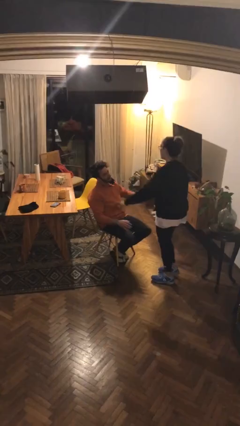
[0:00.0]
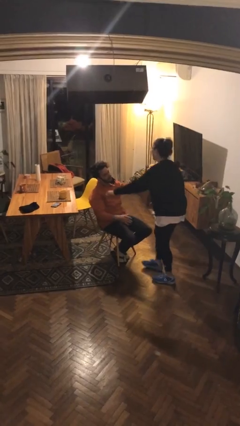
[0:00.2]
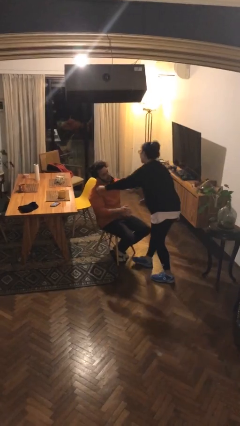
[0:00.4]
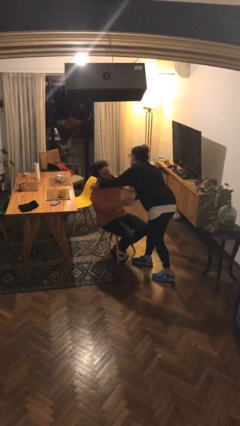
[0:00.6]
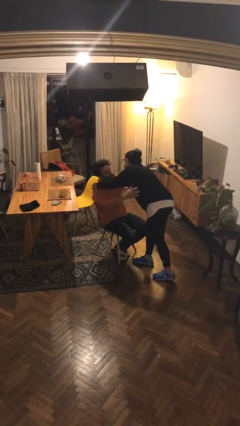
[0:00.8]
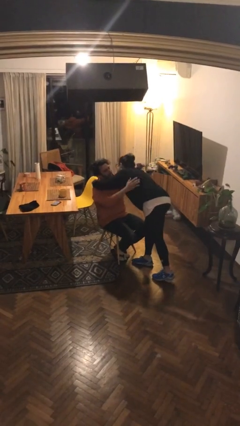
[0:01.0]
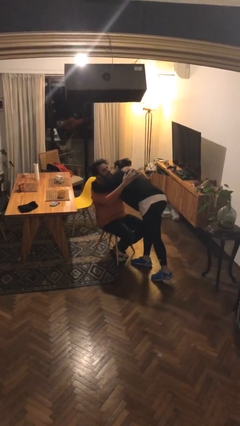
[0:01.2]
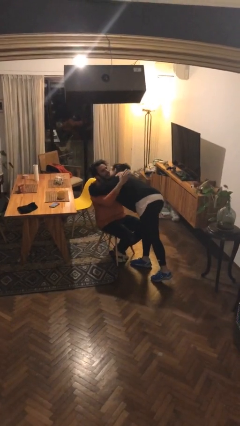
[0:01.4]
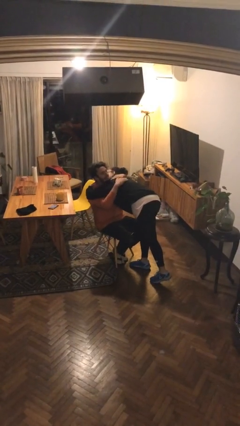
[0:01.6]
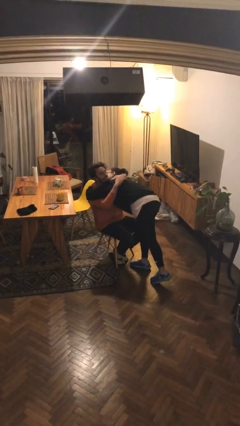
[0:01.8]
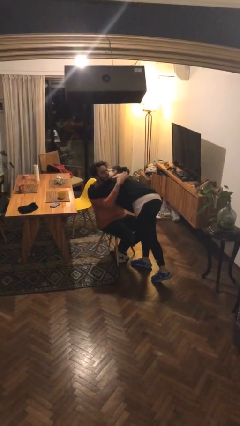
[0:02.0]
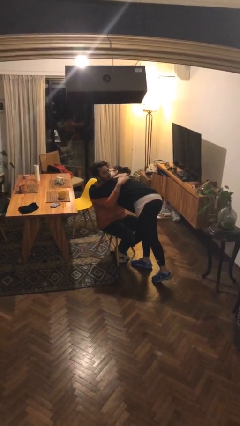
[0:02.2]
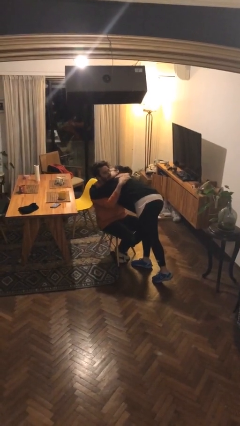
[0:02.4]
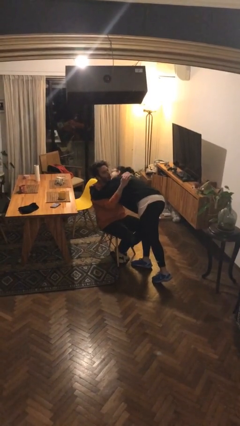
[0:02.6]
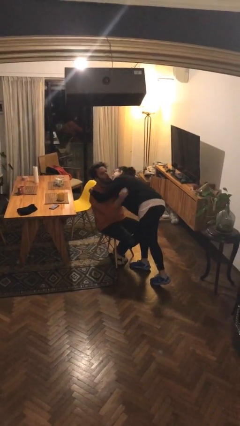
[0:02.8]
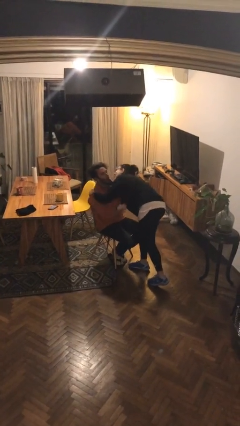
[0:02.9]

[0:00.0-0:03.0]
person embraces person

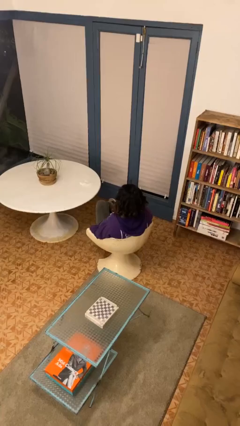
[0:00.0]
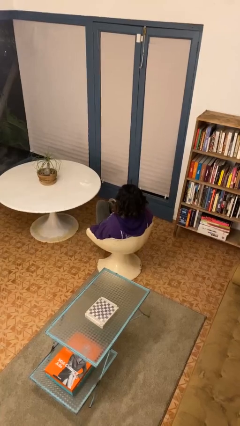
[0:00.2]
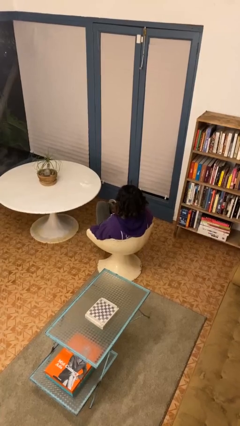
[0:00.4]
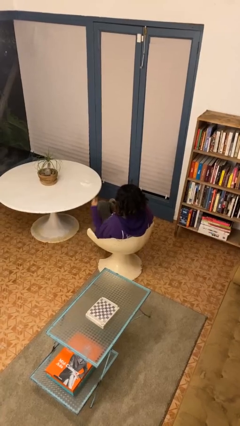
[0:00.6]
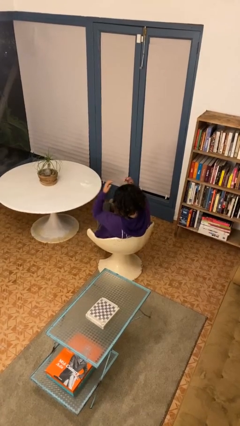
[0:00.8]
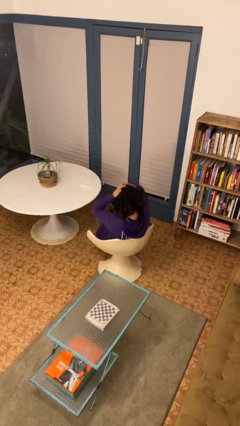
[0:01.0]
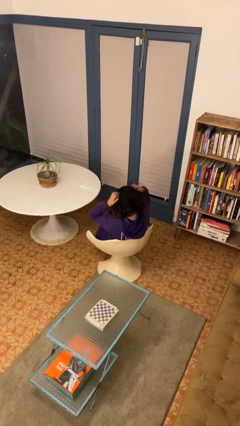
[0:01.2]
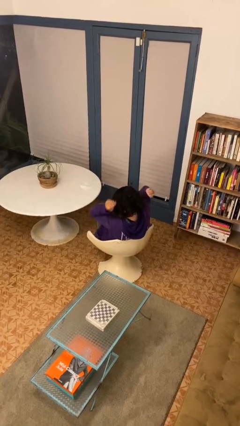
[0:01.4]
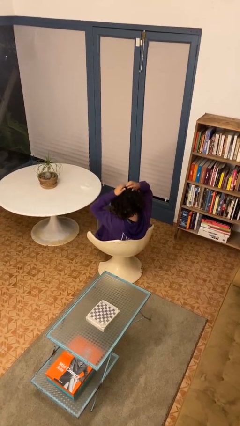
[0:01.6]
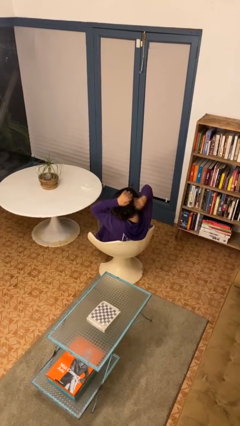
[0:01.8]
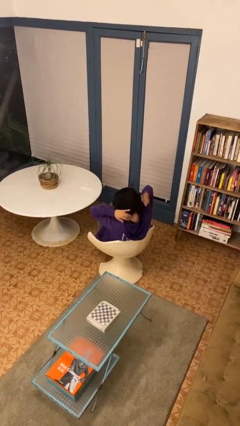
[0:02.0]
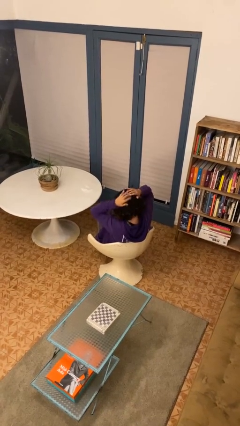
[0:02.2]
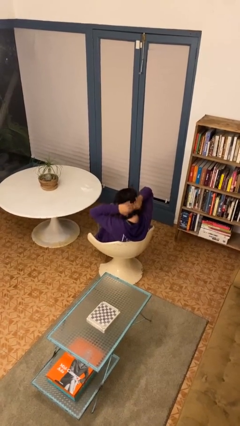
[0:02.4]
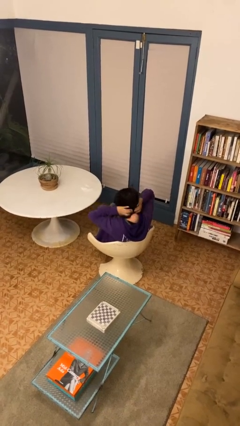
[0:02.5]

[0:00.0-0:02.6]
person strokes hair

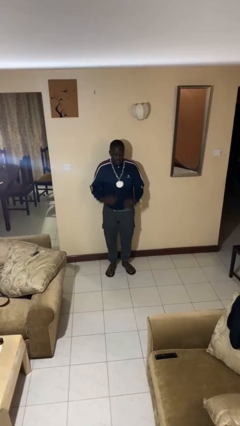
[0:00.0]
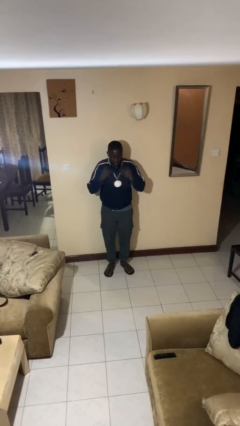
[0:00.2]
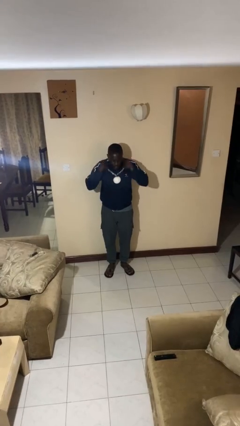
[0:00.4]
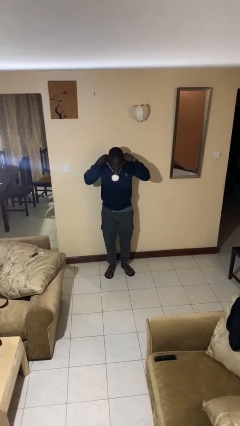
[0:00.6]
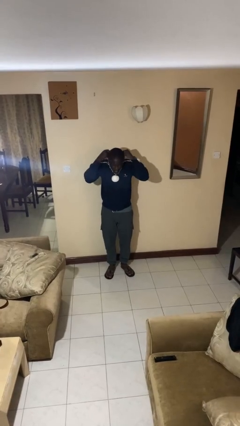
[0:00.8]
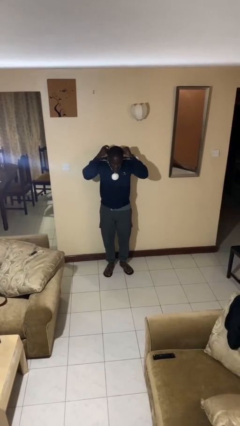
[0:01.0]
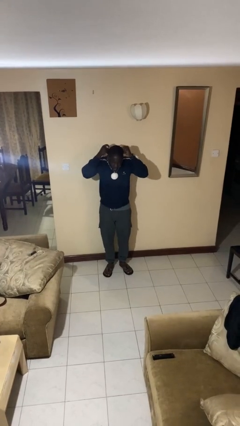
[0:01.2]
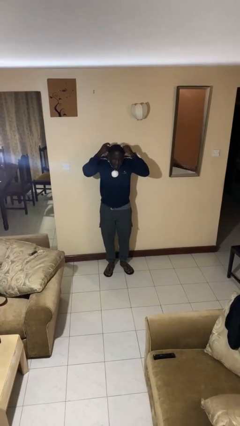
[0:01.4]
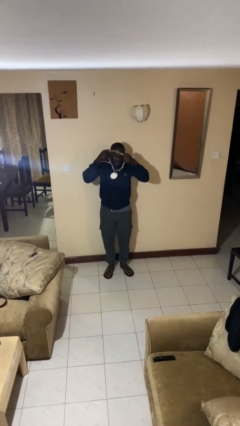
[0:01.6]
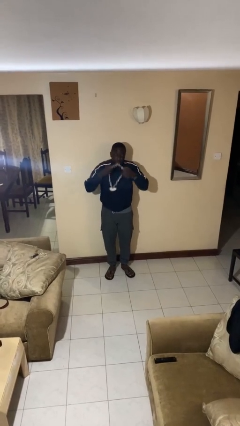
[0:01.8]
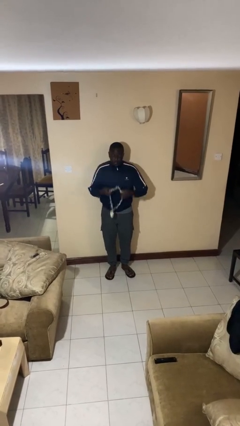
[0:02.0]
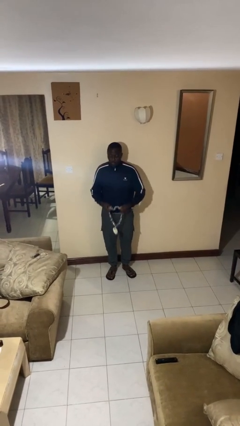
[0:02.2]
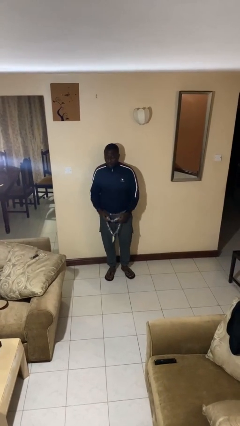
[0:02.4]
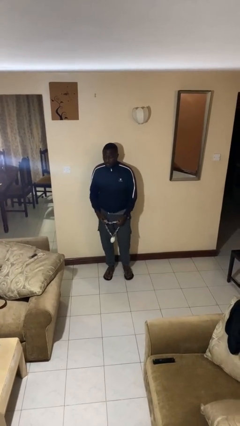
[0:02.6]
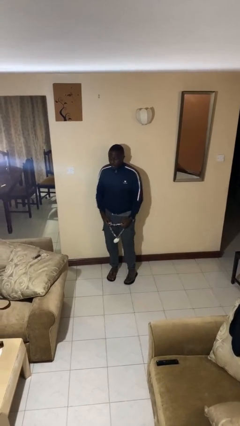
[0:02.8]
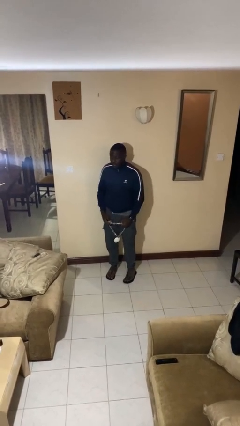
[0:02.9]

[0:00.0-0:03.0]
person takes off necklace

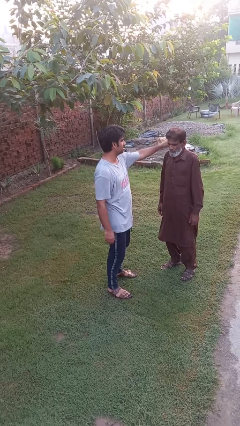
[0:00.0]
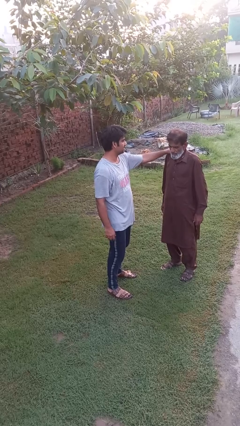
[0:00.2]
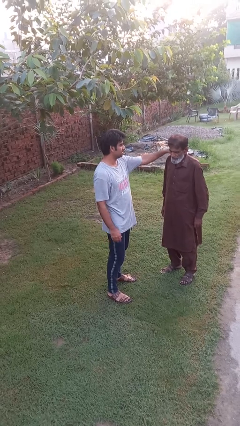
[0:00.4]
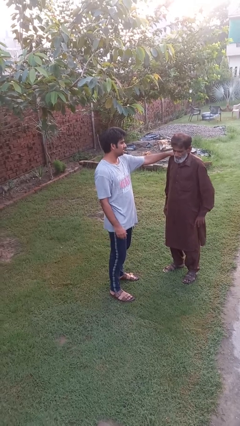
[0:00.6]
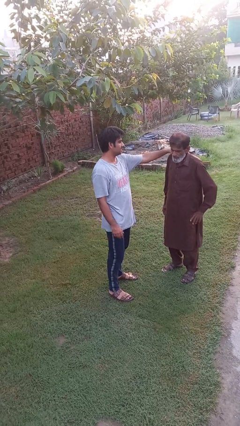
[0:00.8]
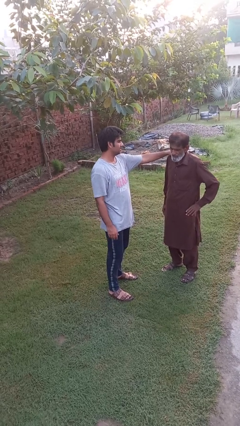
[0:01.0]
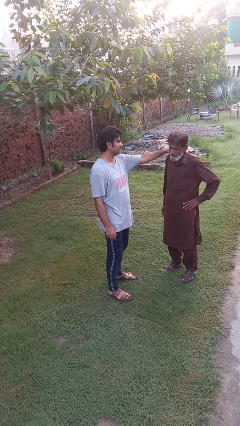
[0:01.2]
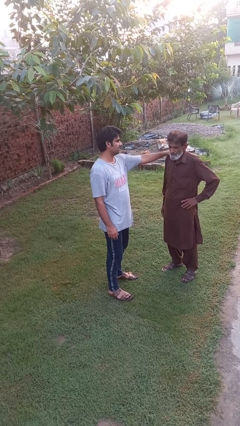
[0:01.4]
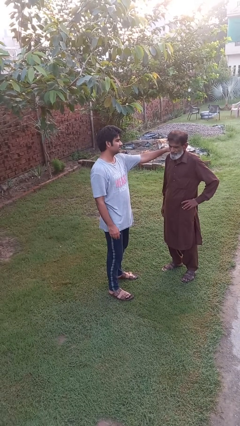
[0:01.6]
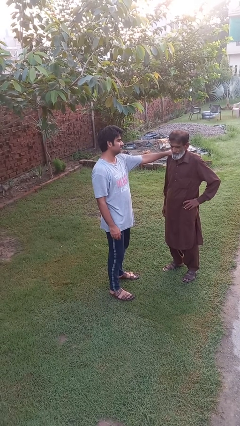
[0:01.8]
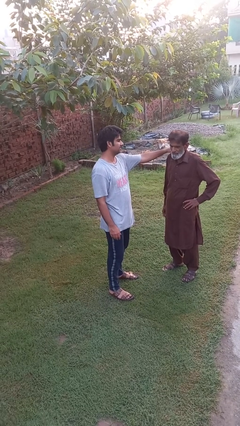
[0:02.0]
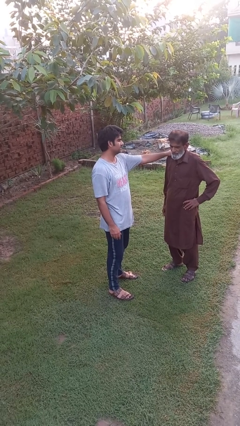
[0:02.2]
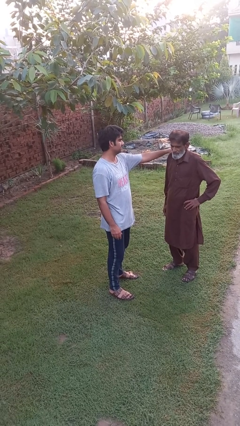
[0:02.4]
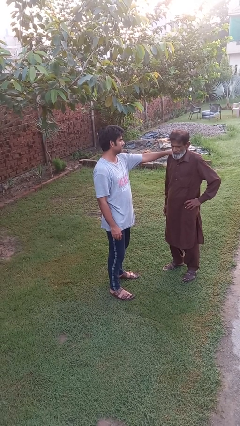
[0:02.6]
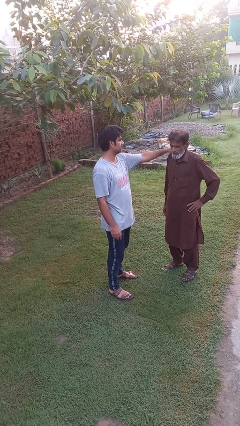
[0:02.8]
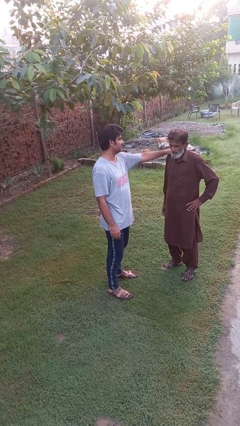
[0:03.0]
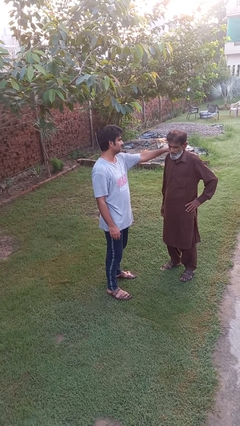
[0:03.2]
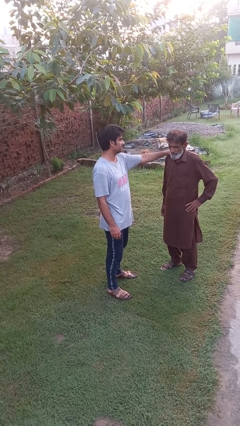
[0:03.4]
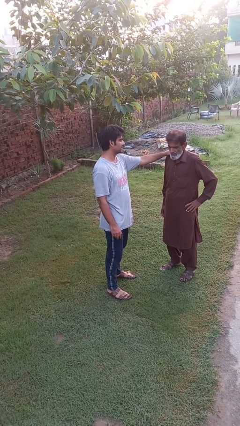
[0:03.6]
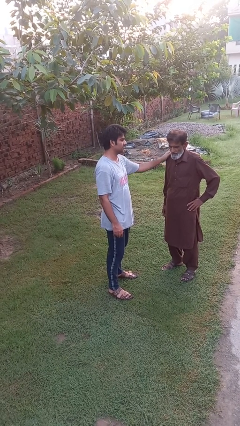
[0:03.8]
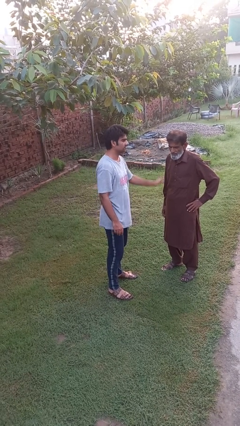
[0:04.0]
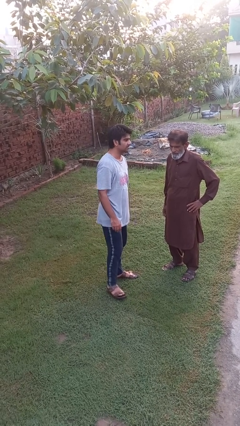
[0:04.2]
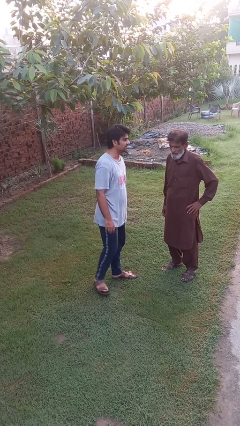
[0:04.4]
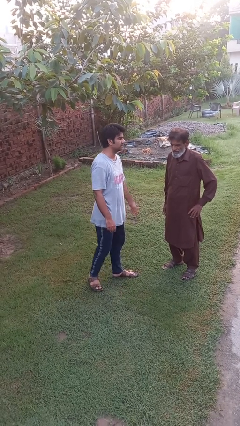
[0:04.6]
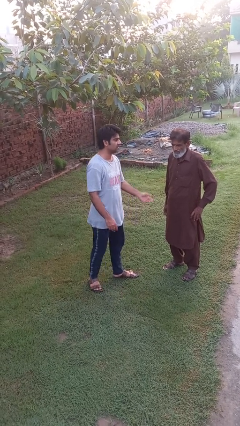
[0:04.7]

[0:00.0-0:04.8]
person pounds shoulders of person

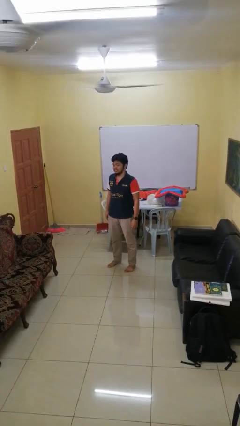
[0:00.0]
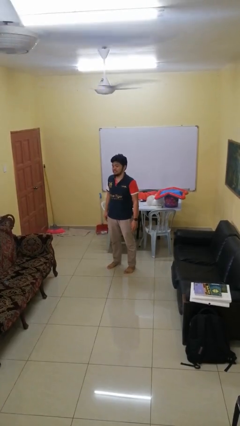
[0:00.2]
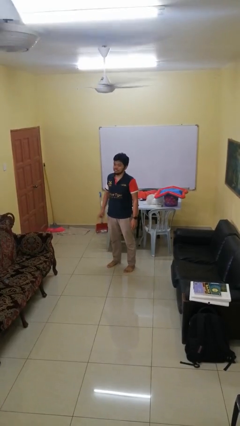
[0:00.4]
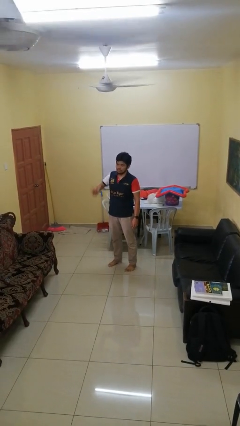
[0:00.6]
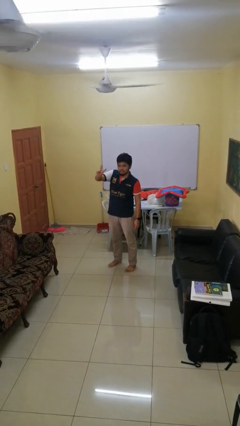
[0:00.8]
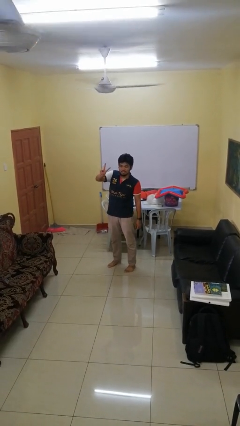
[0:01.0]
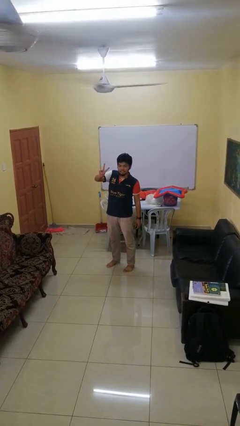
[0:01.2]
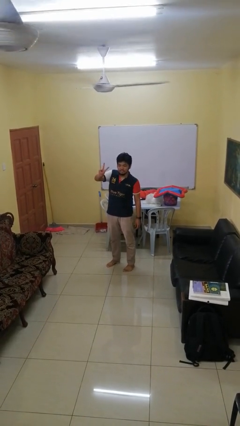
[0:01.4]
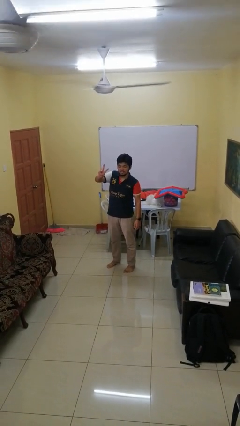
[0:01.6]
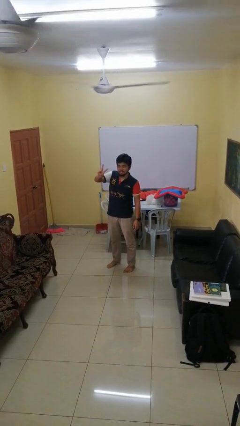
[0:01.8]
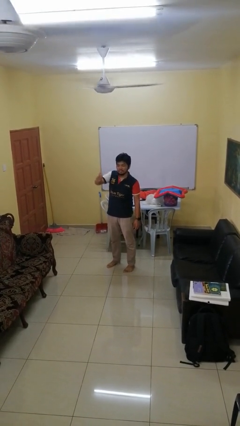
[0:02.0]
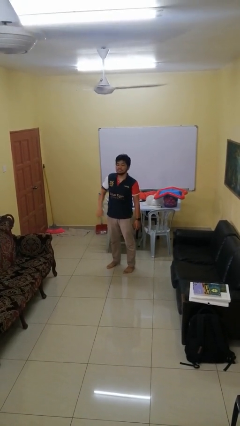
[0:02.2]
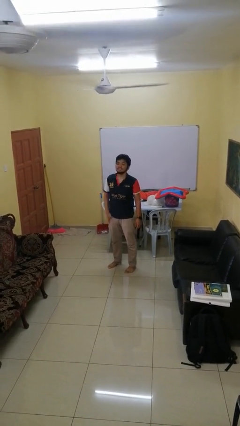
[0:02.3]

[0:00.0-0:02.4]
person gestures peace

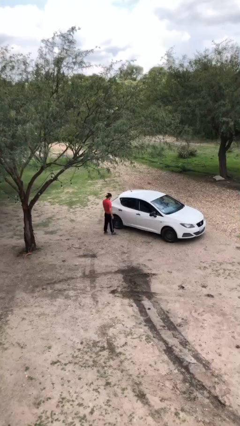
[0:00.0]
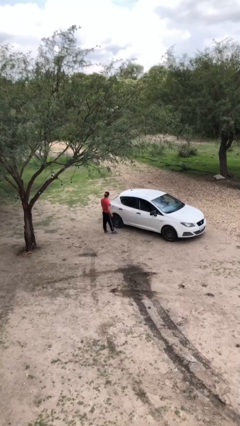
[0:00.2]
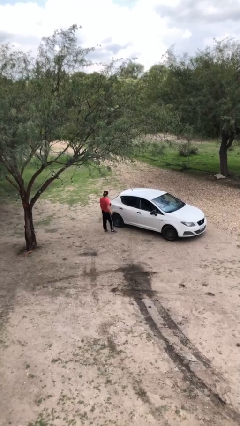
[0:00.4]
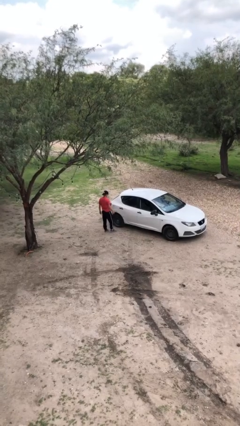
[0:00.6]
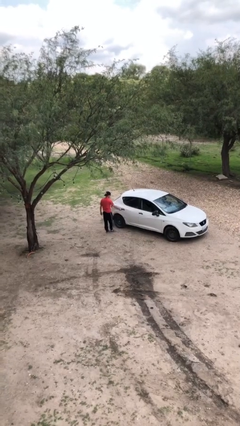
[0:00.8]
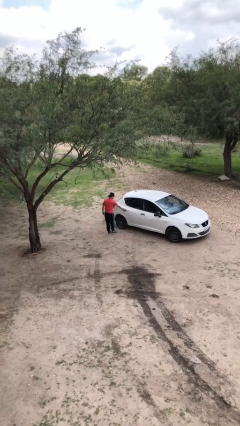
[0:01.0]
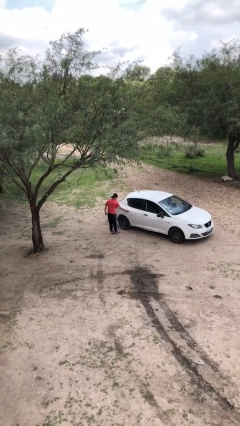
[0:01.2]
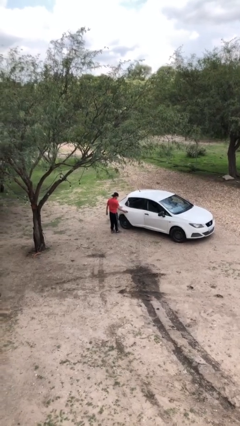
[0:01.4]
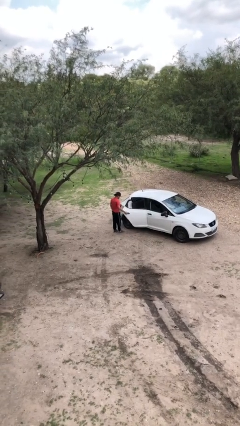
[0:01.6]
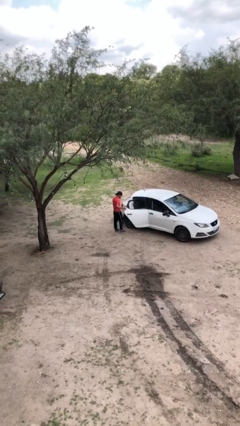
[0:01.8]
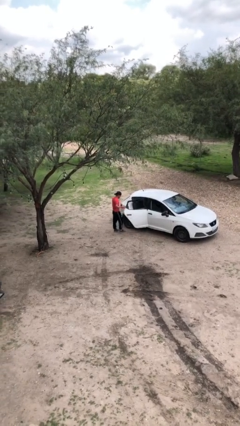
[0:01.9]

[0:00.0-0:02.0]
person opens car door

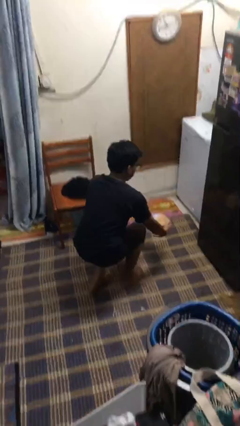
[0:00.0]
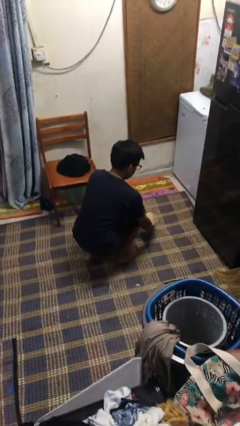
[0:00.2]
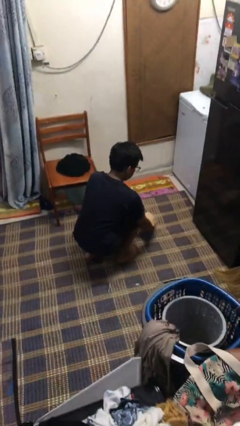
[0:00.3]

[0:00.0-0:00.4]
person catches dropped object
